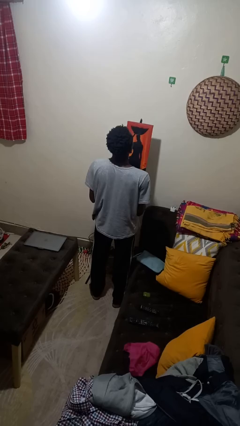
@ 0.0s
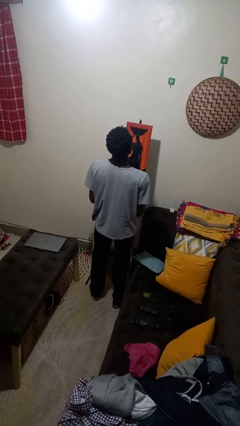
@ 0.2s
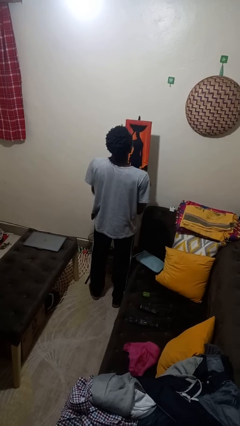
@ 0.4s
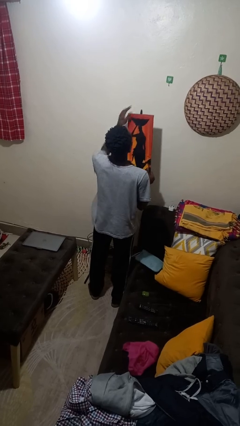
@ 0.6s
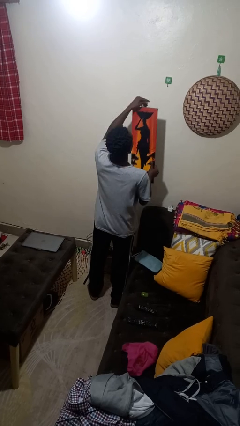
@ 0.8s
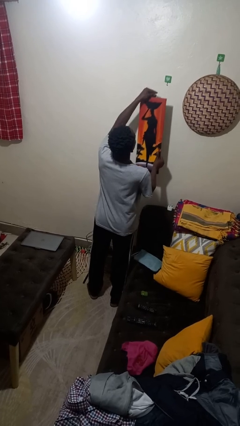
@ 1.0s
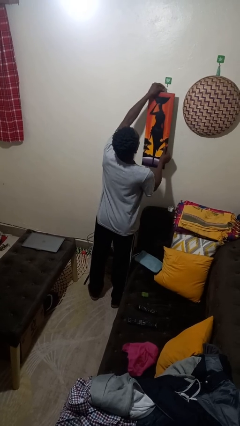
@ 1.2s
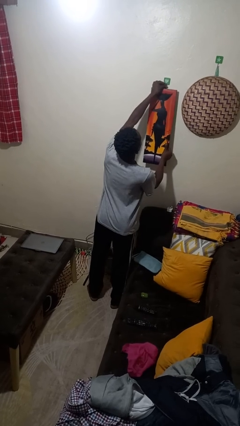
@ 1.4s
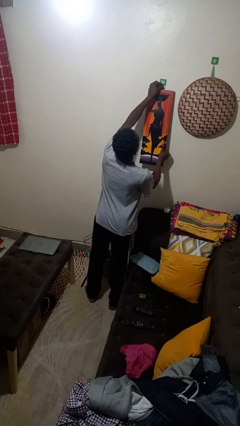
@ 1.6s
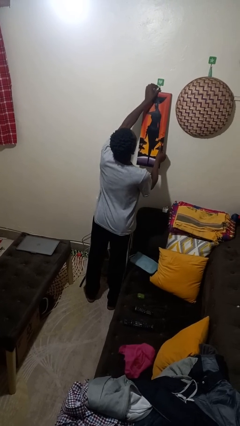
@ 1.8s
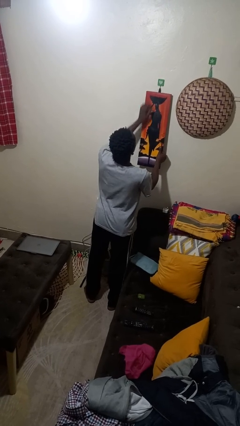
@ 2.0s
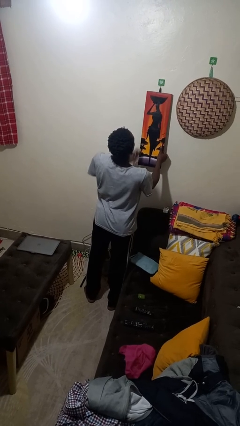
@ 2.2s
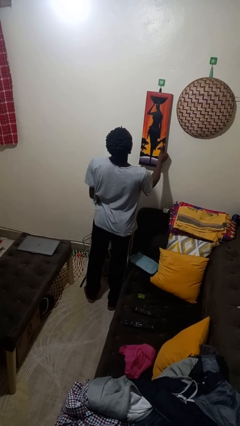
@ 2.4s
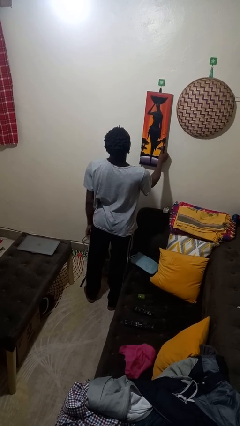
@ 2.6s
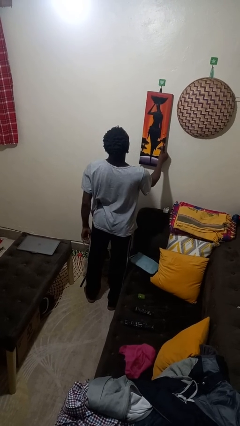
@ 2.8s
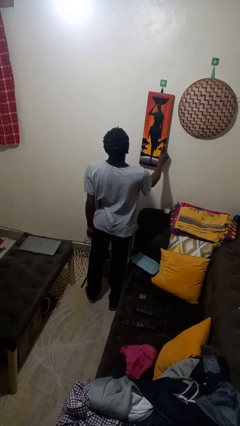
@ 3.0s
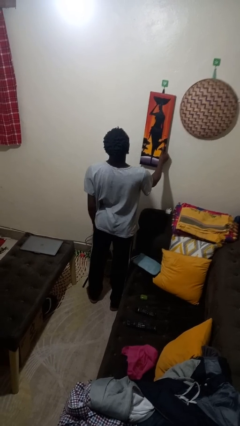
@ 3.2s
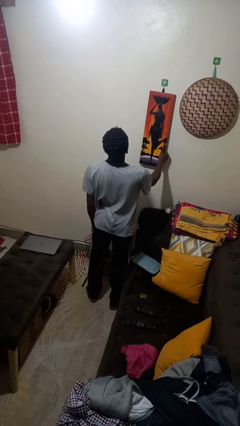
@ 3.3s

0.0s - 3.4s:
person puts up picture frame

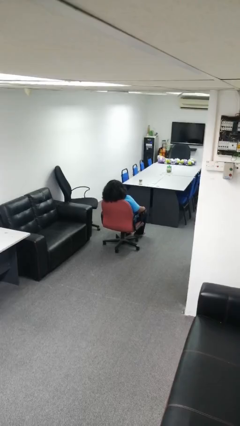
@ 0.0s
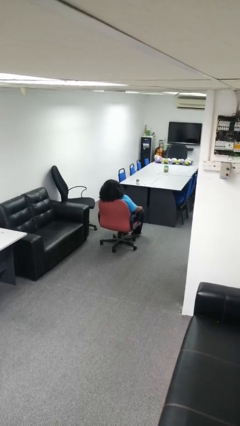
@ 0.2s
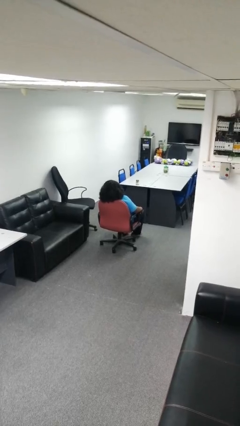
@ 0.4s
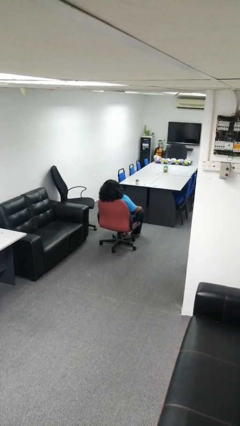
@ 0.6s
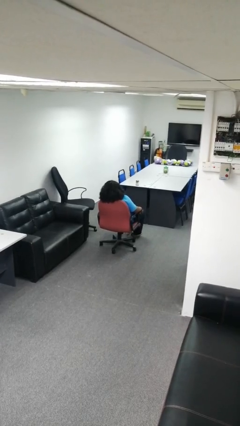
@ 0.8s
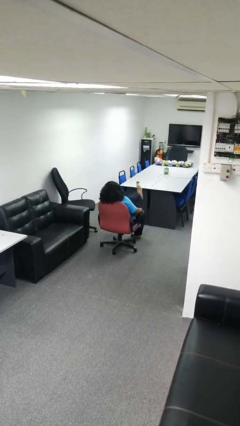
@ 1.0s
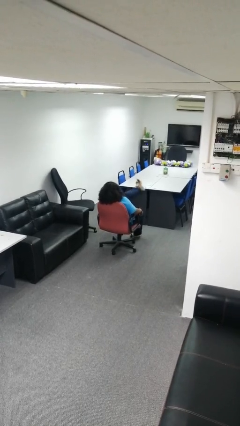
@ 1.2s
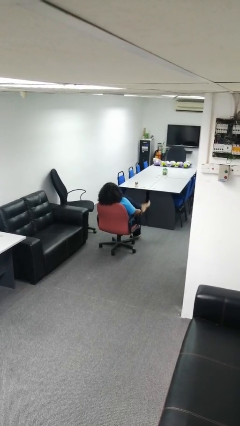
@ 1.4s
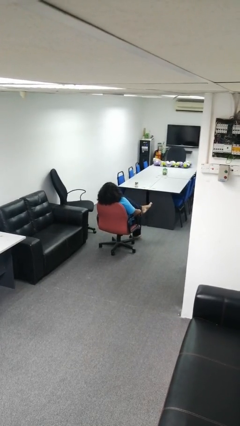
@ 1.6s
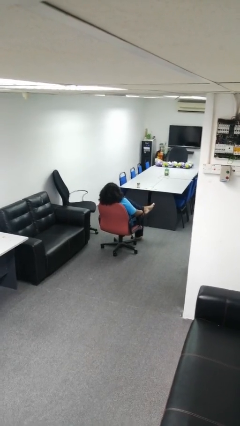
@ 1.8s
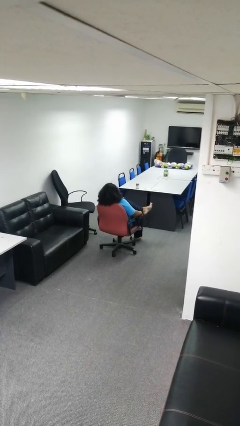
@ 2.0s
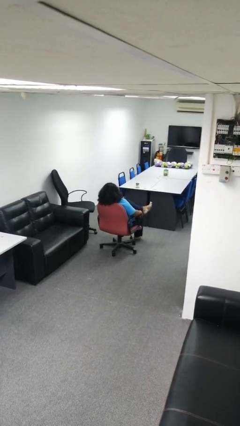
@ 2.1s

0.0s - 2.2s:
person crosses legs

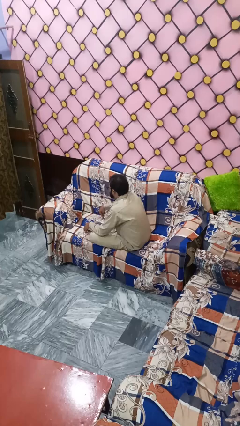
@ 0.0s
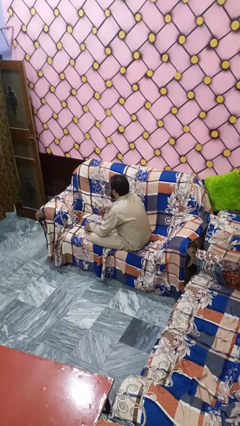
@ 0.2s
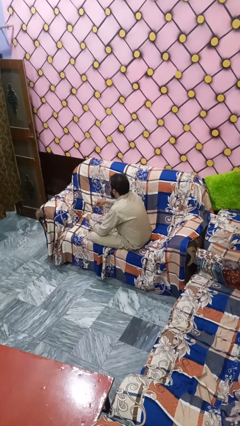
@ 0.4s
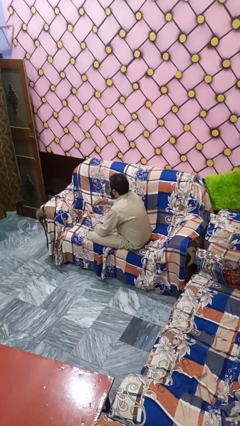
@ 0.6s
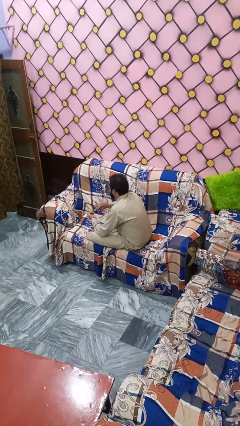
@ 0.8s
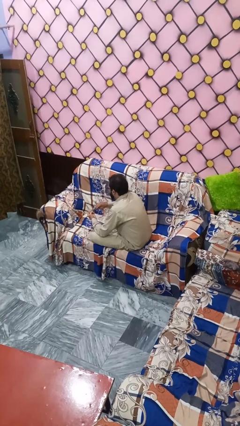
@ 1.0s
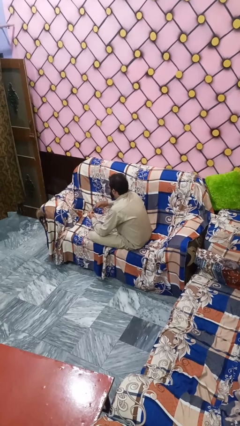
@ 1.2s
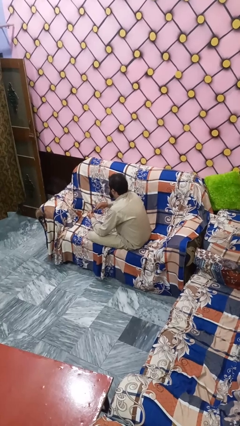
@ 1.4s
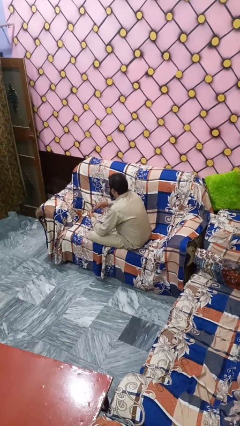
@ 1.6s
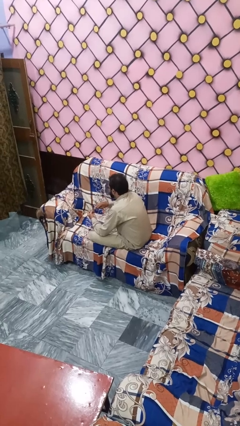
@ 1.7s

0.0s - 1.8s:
person paints fingernails

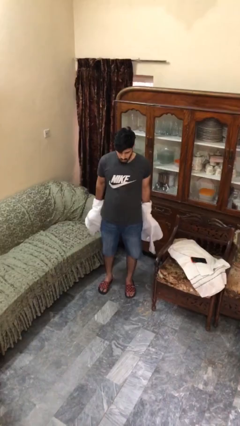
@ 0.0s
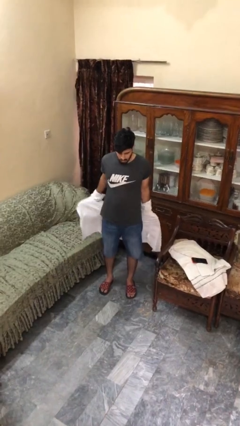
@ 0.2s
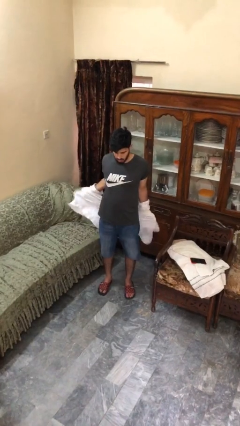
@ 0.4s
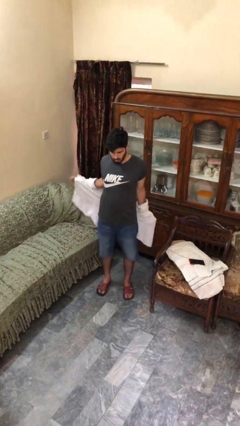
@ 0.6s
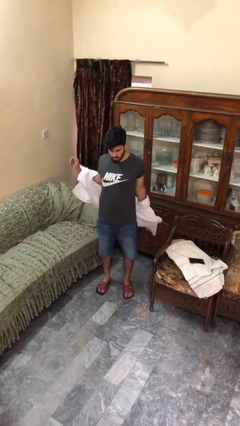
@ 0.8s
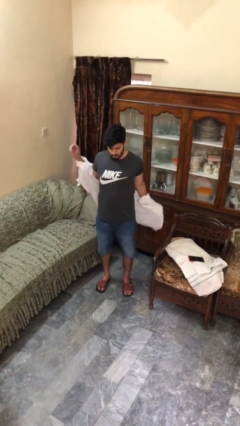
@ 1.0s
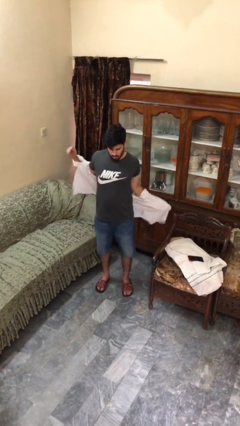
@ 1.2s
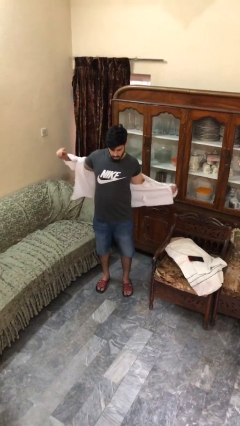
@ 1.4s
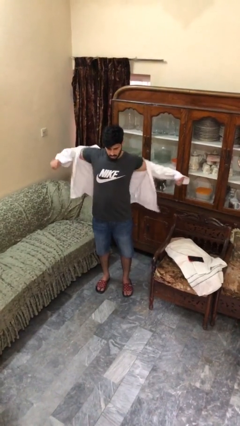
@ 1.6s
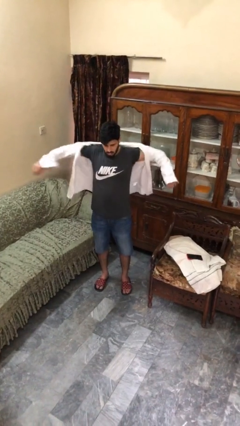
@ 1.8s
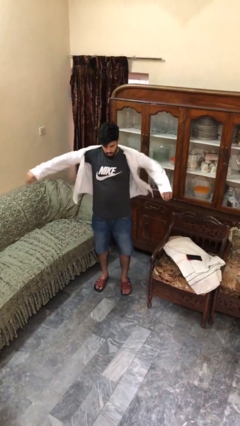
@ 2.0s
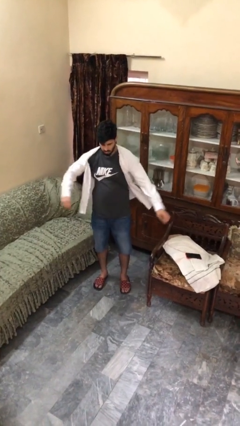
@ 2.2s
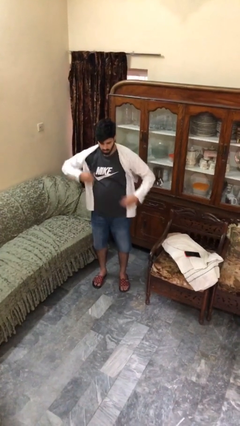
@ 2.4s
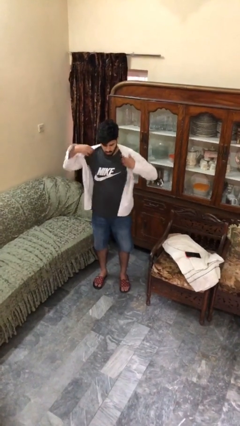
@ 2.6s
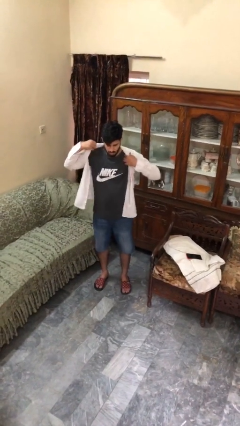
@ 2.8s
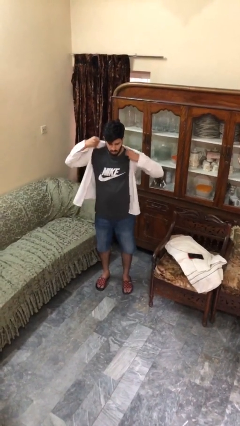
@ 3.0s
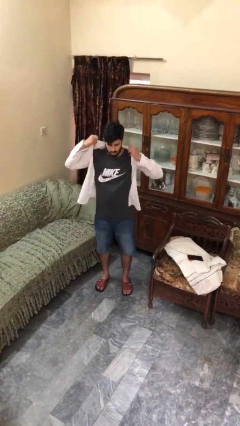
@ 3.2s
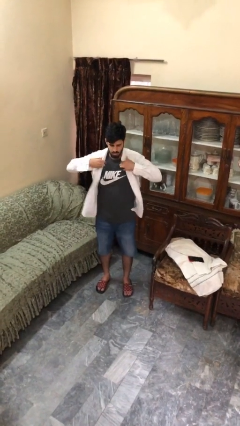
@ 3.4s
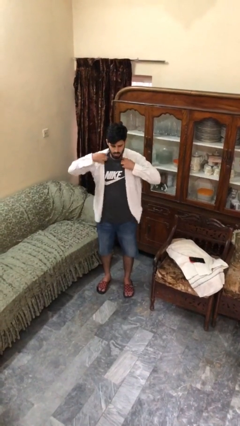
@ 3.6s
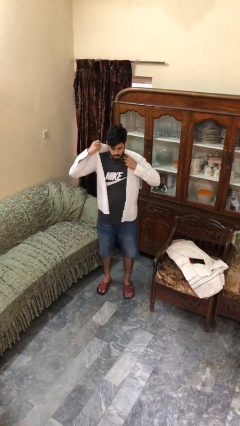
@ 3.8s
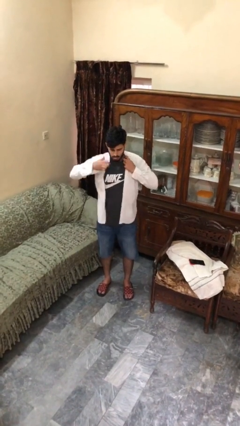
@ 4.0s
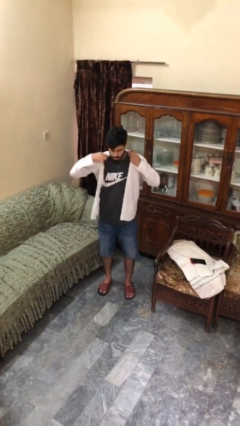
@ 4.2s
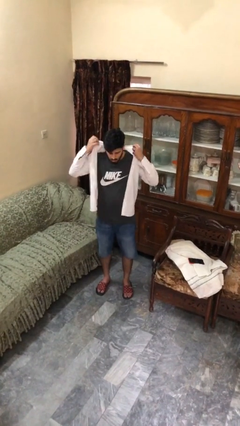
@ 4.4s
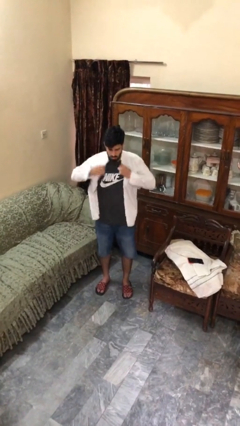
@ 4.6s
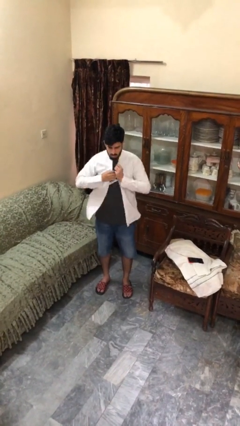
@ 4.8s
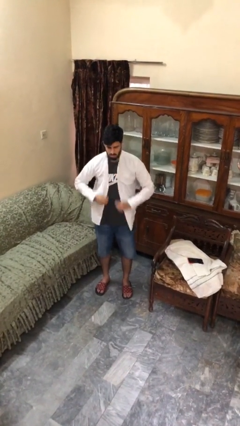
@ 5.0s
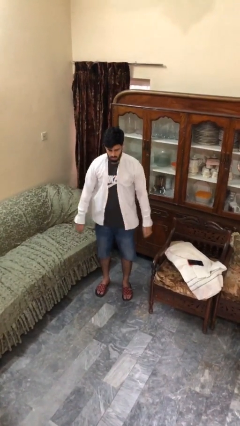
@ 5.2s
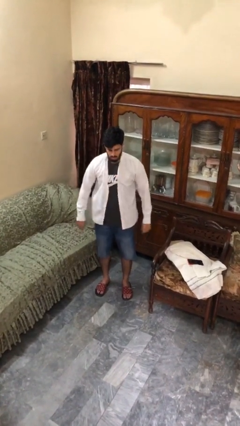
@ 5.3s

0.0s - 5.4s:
person puts on shirt

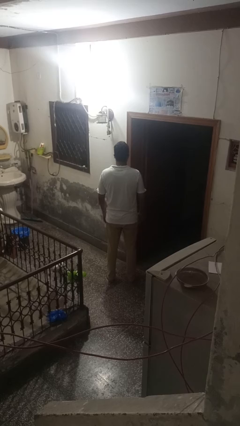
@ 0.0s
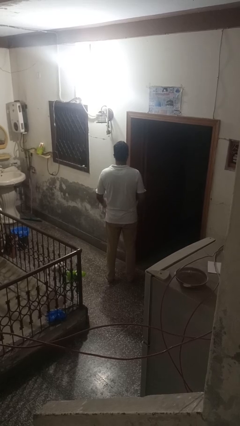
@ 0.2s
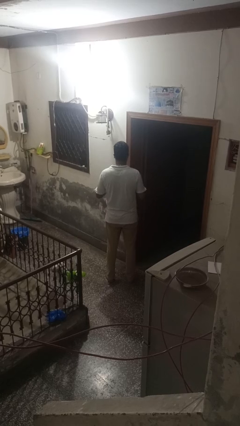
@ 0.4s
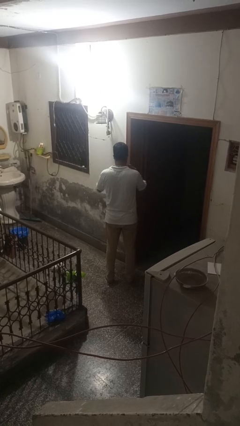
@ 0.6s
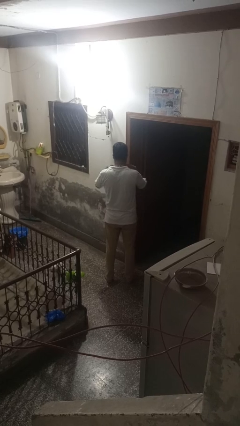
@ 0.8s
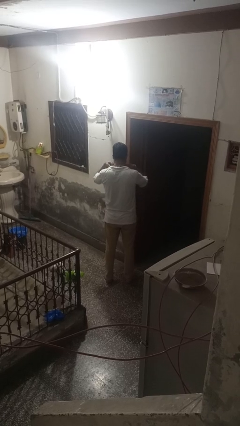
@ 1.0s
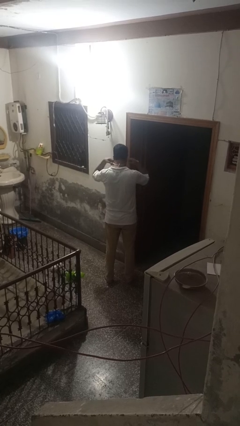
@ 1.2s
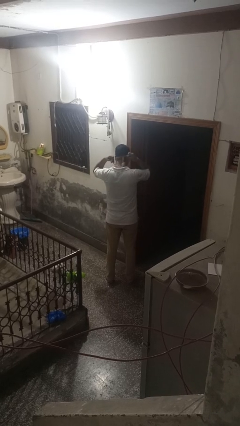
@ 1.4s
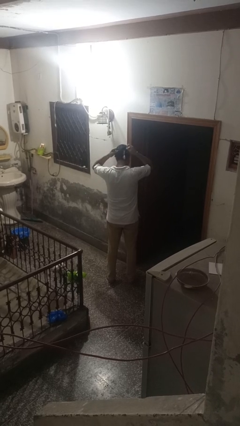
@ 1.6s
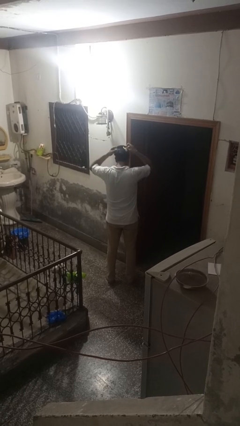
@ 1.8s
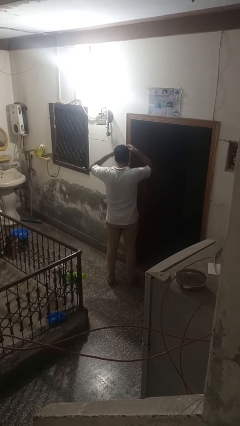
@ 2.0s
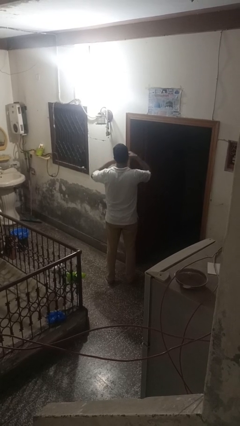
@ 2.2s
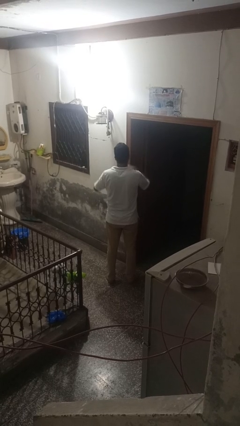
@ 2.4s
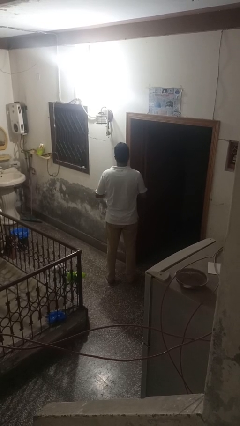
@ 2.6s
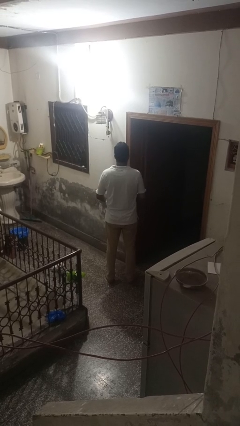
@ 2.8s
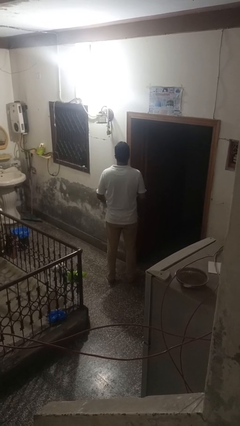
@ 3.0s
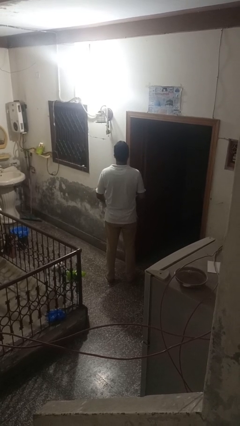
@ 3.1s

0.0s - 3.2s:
person takes off necklace

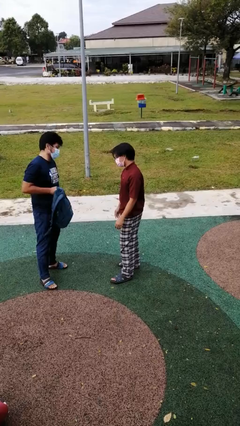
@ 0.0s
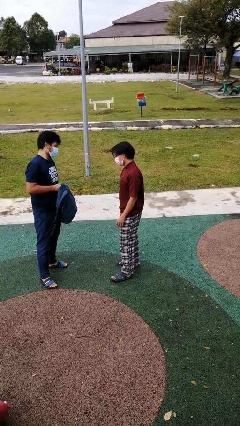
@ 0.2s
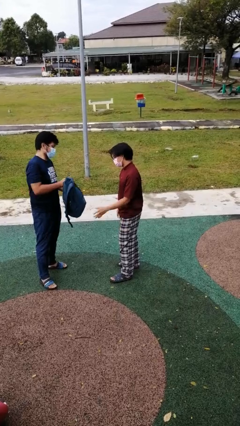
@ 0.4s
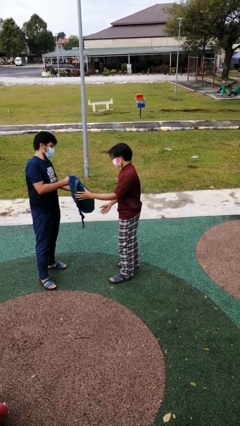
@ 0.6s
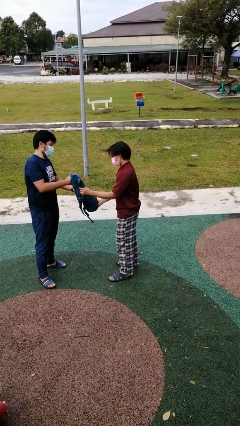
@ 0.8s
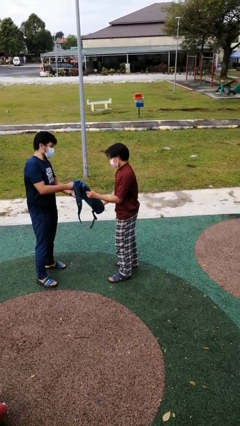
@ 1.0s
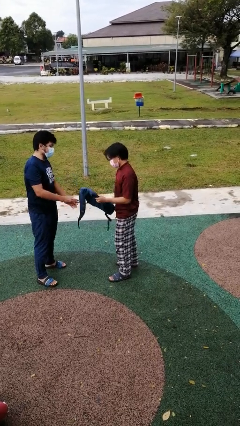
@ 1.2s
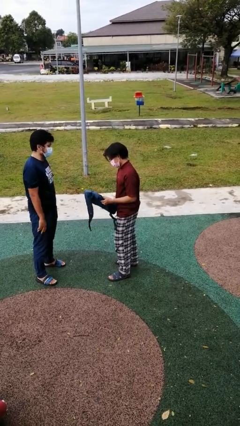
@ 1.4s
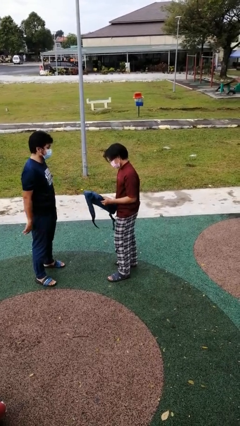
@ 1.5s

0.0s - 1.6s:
person transfers object to person
